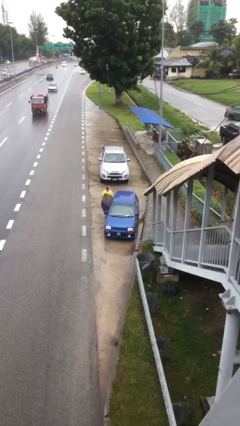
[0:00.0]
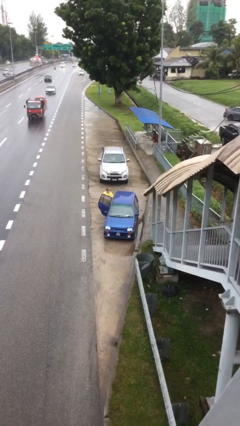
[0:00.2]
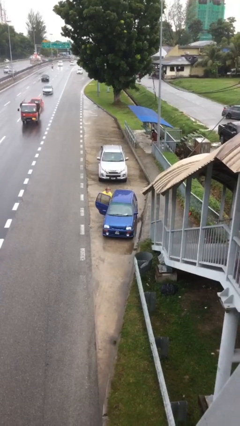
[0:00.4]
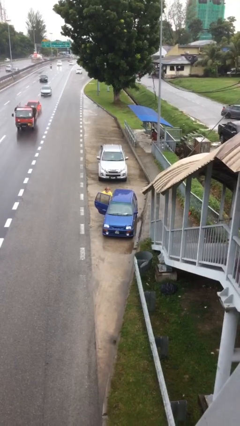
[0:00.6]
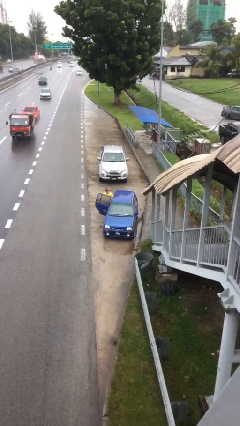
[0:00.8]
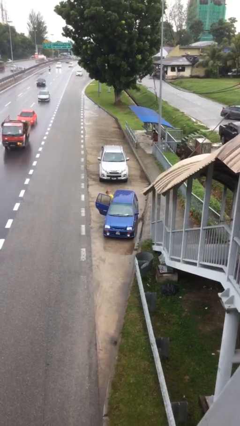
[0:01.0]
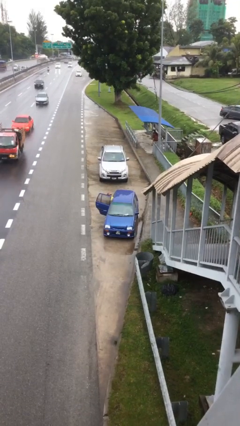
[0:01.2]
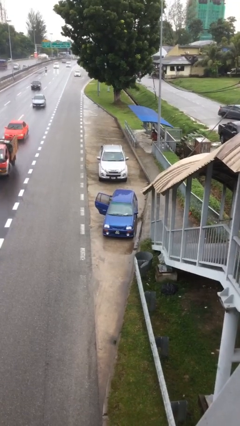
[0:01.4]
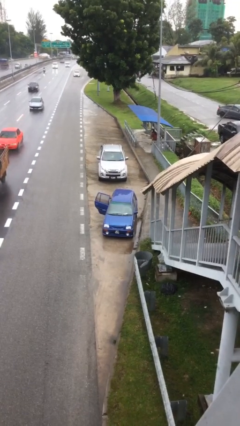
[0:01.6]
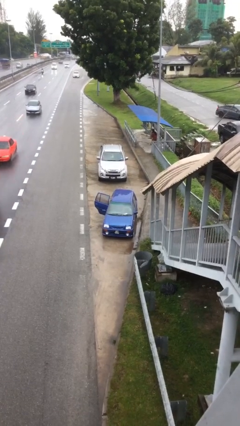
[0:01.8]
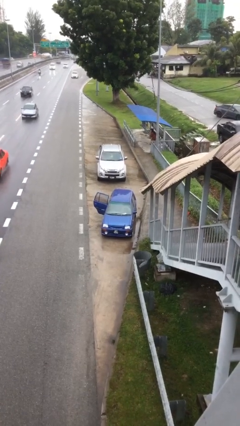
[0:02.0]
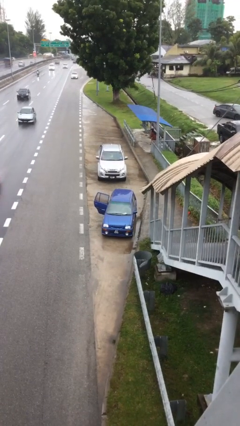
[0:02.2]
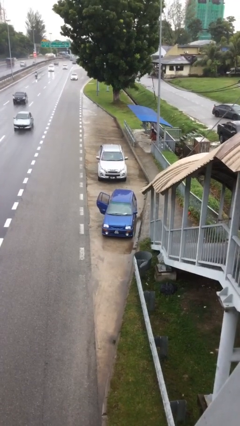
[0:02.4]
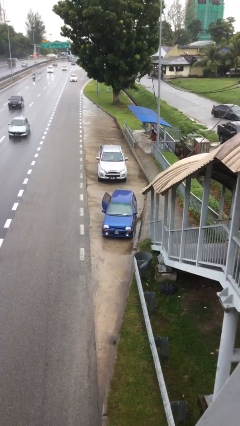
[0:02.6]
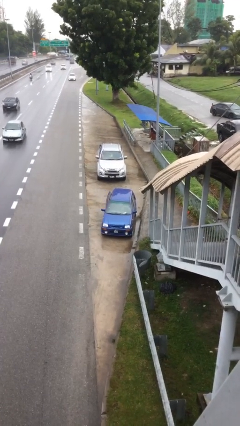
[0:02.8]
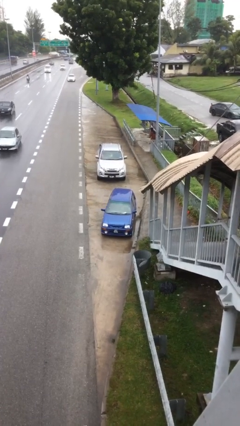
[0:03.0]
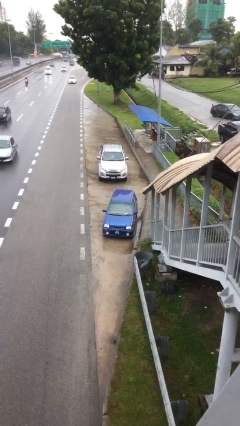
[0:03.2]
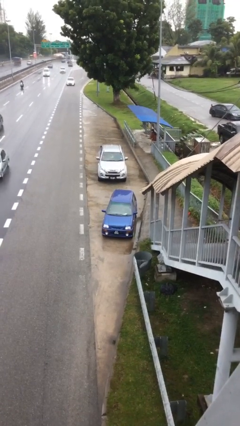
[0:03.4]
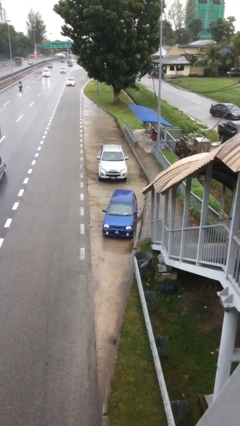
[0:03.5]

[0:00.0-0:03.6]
car picks up person

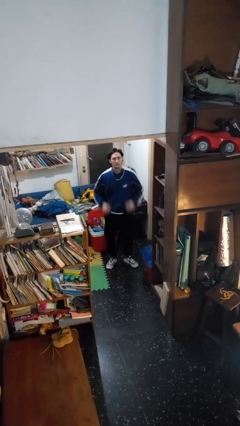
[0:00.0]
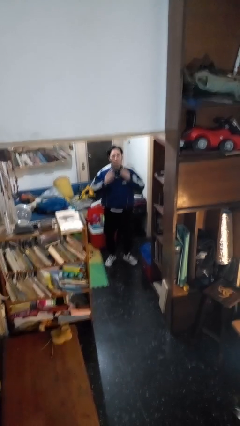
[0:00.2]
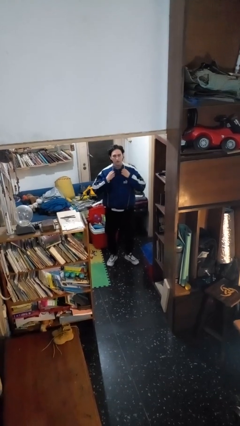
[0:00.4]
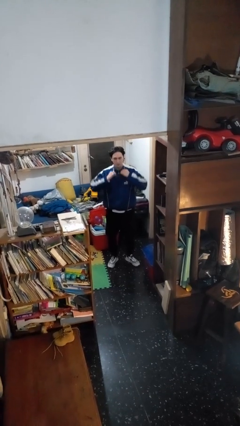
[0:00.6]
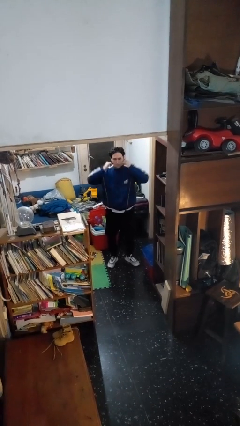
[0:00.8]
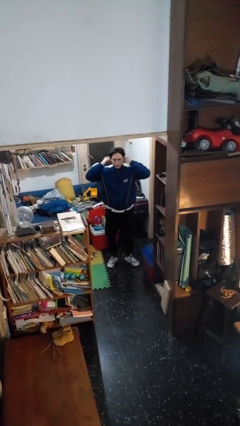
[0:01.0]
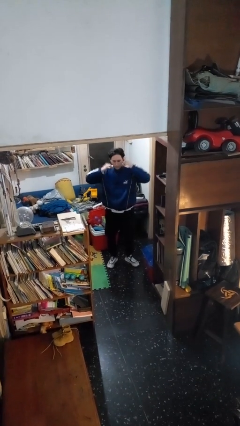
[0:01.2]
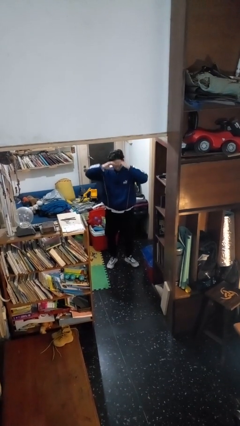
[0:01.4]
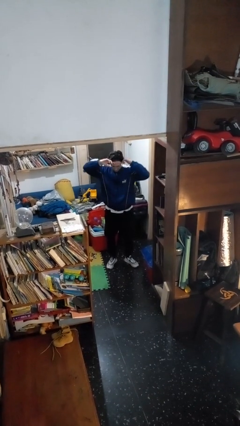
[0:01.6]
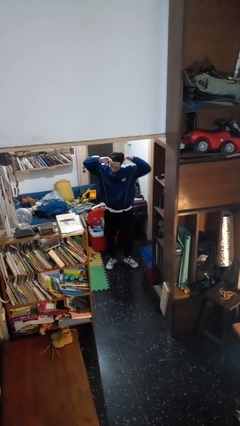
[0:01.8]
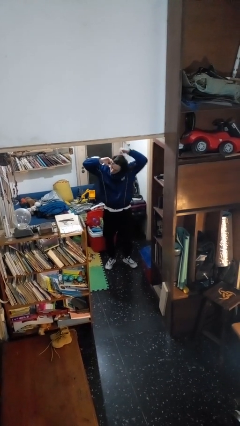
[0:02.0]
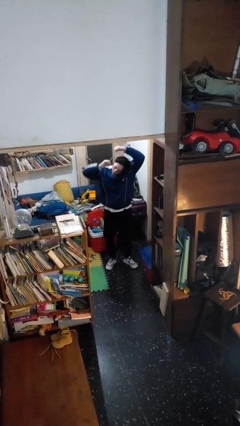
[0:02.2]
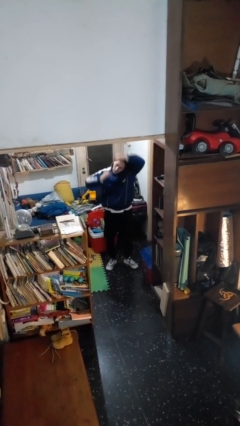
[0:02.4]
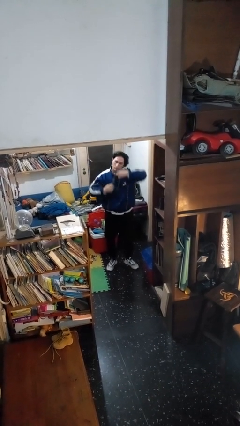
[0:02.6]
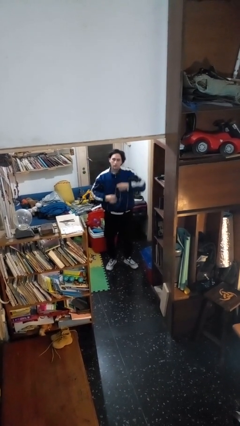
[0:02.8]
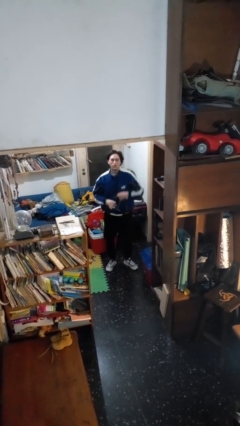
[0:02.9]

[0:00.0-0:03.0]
person takes off necklace

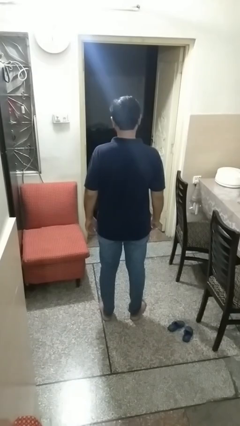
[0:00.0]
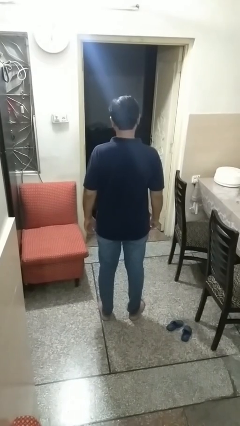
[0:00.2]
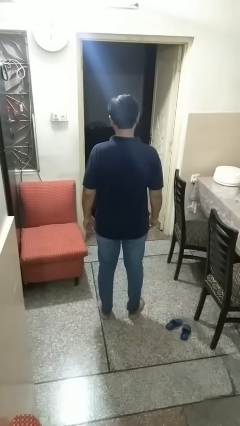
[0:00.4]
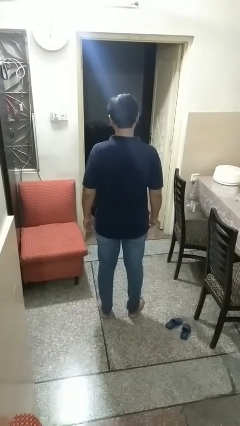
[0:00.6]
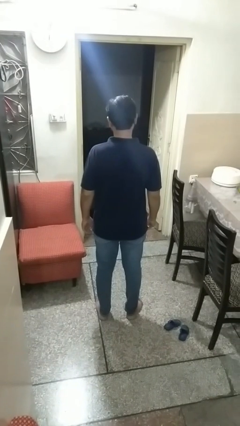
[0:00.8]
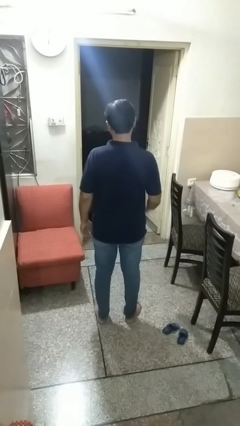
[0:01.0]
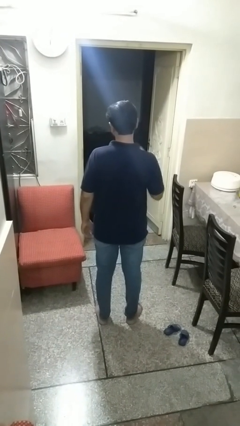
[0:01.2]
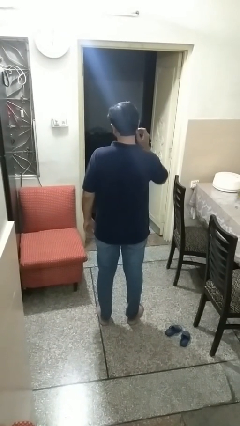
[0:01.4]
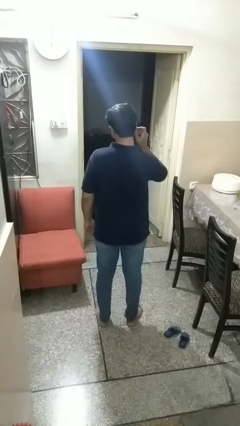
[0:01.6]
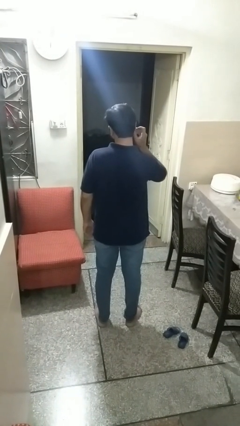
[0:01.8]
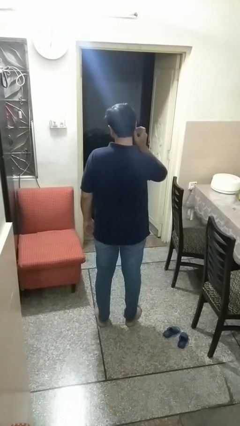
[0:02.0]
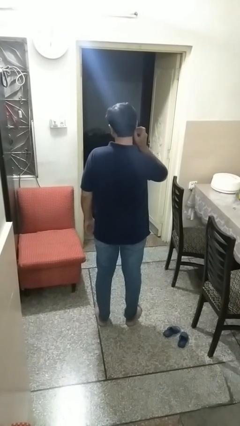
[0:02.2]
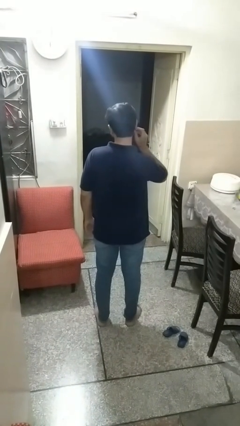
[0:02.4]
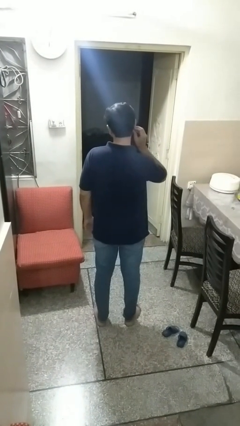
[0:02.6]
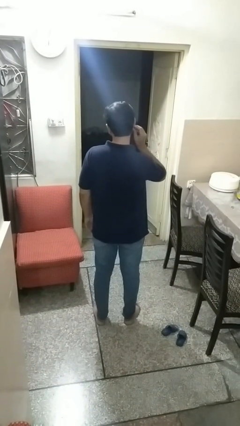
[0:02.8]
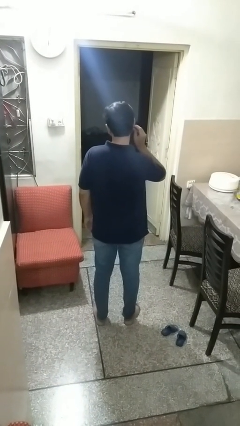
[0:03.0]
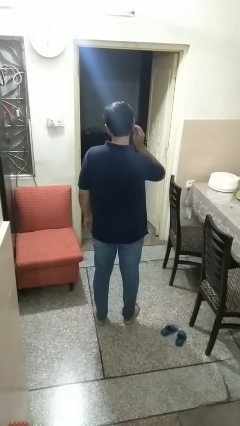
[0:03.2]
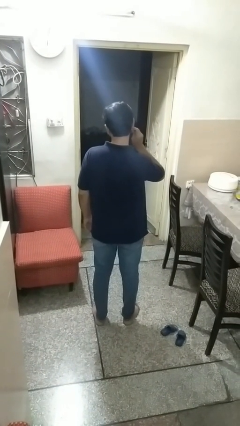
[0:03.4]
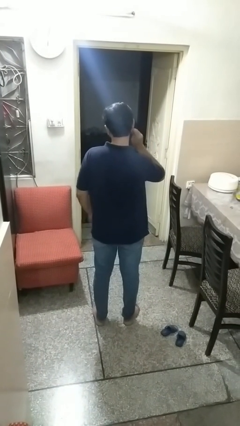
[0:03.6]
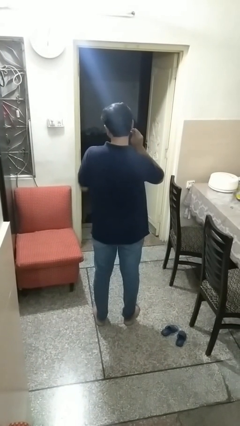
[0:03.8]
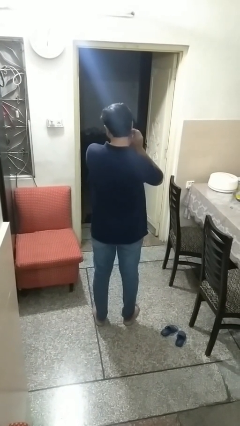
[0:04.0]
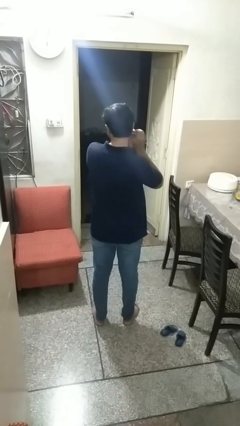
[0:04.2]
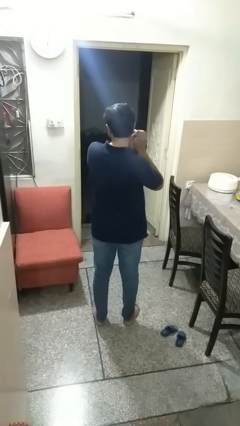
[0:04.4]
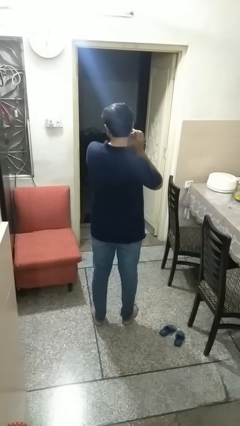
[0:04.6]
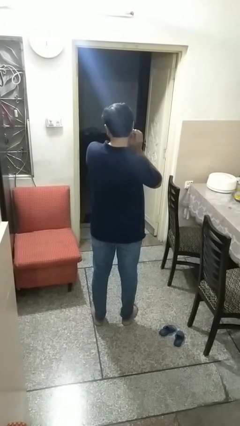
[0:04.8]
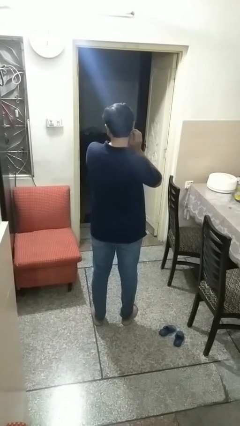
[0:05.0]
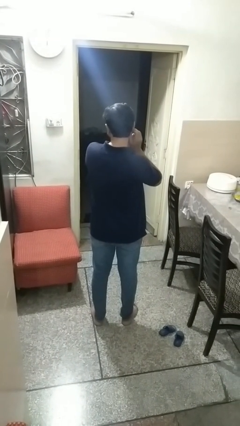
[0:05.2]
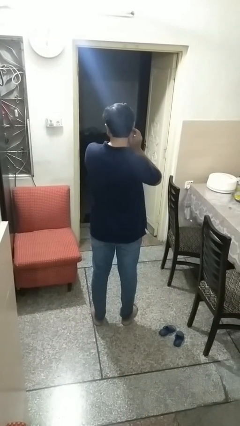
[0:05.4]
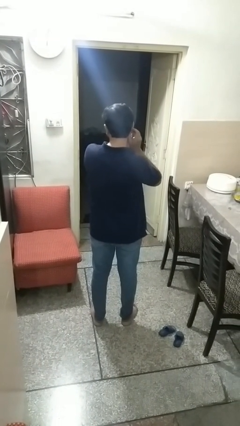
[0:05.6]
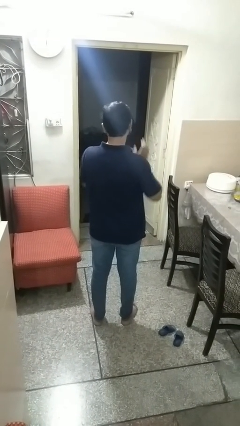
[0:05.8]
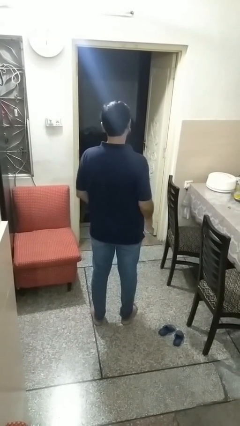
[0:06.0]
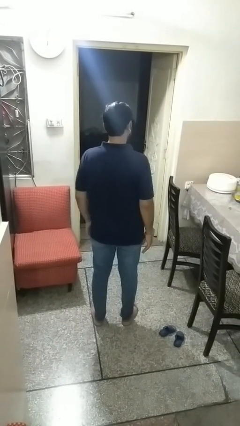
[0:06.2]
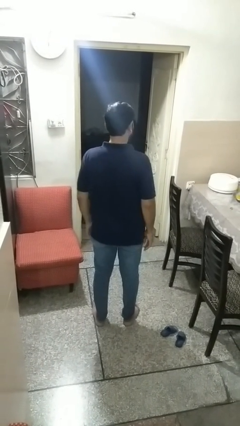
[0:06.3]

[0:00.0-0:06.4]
person puts on earrings

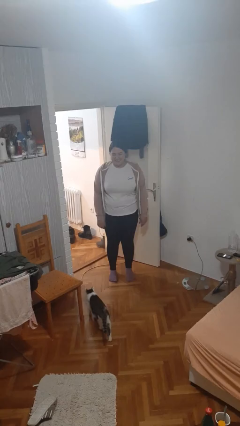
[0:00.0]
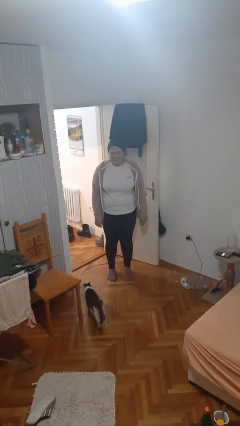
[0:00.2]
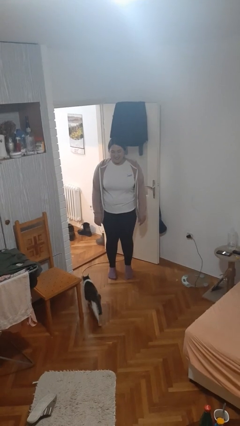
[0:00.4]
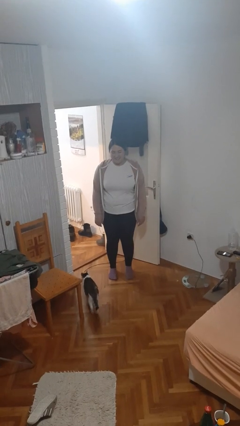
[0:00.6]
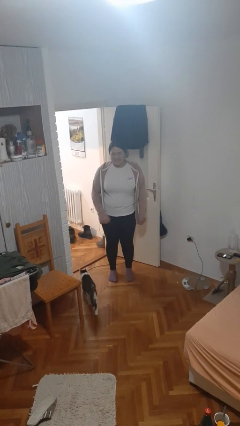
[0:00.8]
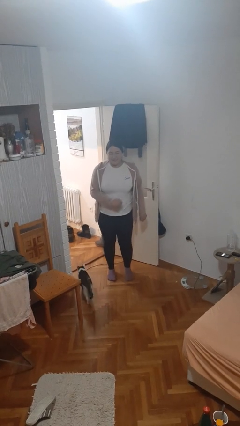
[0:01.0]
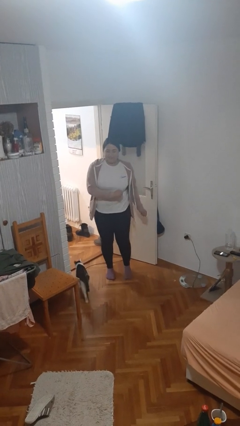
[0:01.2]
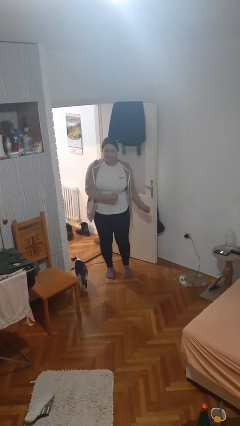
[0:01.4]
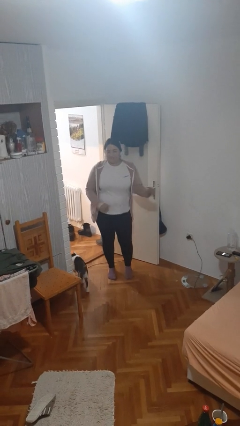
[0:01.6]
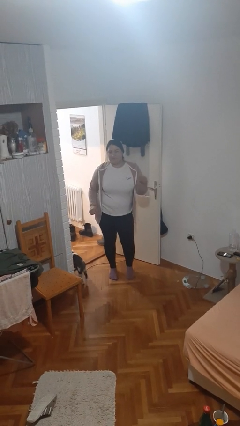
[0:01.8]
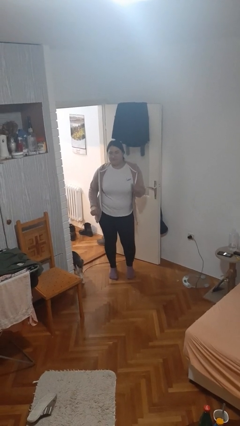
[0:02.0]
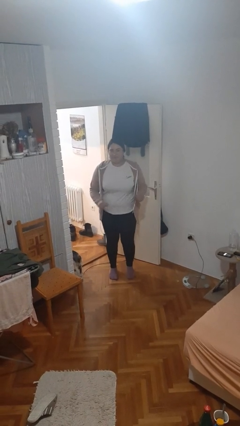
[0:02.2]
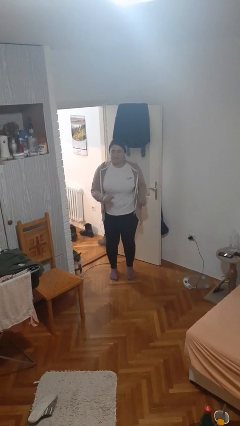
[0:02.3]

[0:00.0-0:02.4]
person dances in place

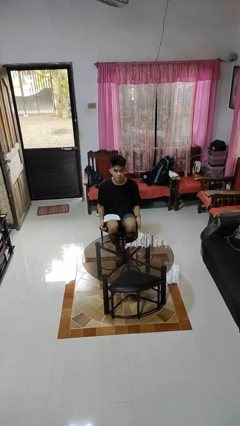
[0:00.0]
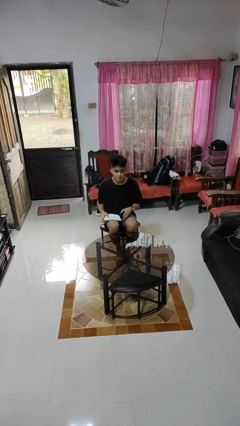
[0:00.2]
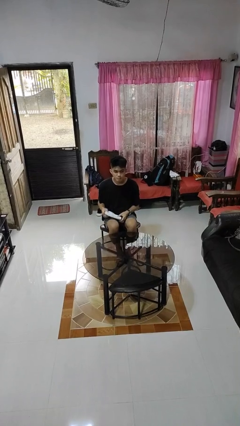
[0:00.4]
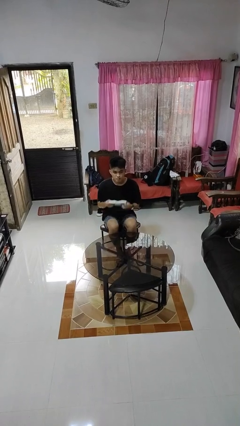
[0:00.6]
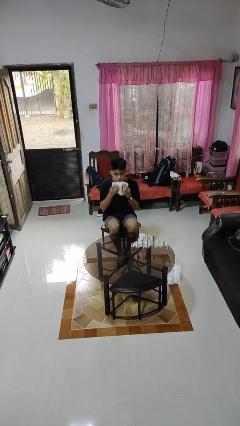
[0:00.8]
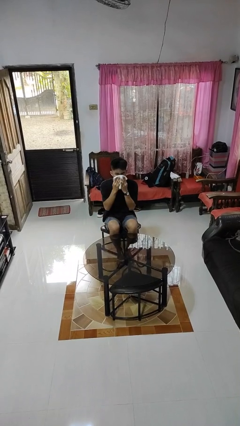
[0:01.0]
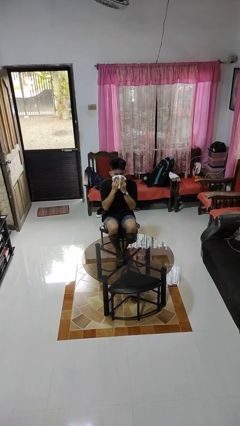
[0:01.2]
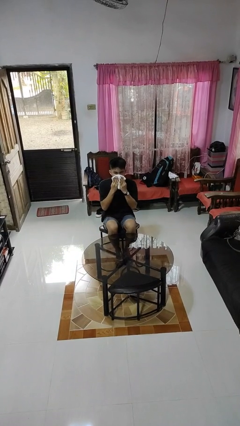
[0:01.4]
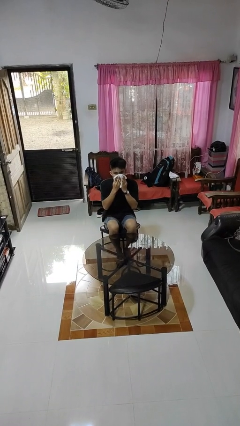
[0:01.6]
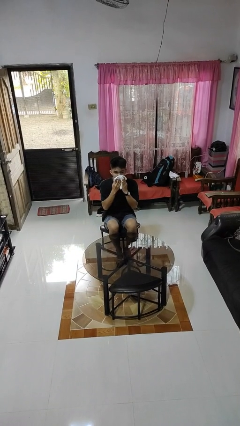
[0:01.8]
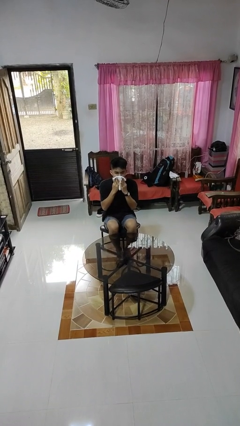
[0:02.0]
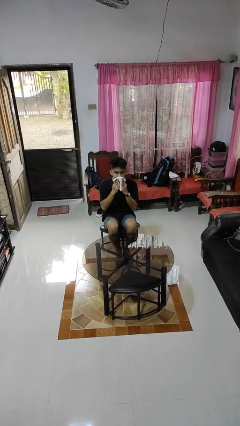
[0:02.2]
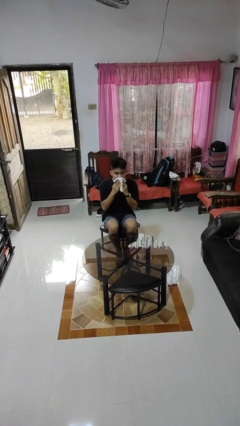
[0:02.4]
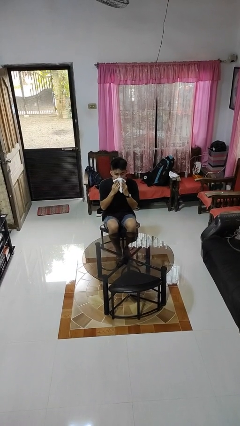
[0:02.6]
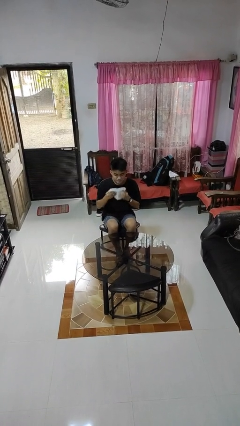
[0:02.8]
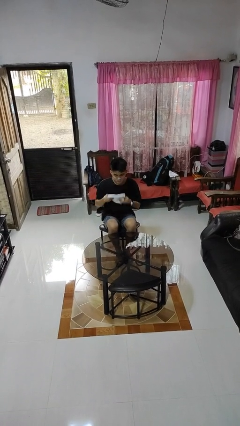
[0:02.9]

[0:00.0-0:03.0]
person wipes mouth with napkin
